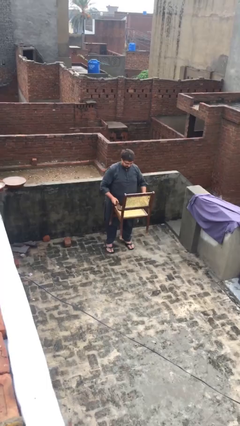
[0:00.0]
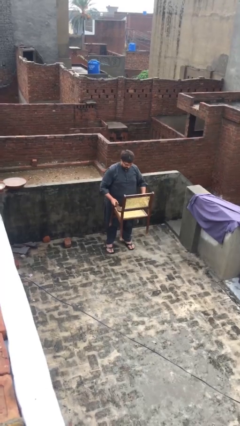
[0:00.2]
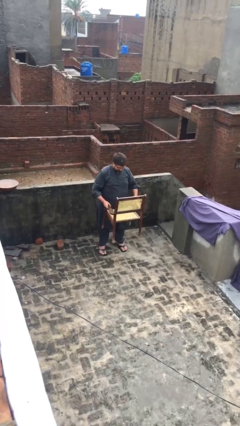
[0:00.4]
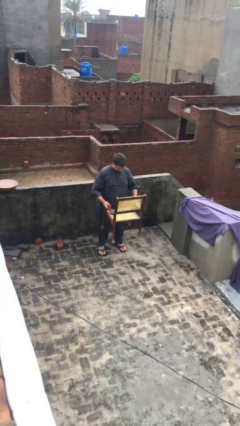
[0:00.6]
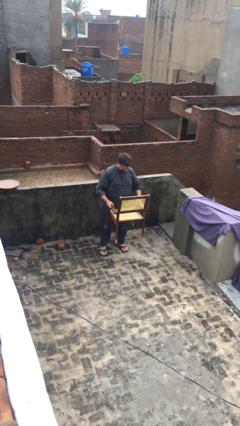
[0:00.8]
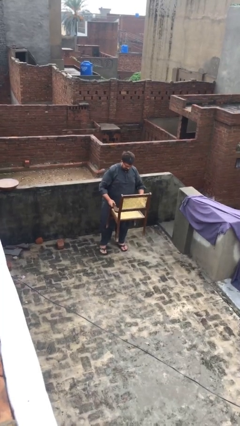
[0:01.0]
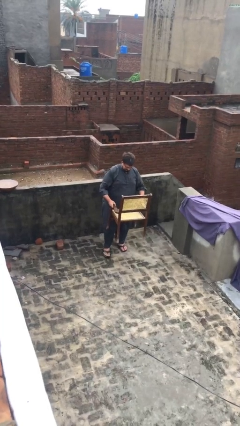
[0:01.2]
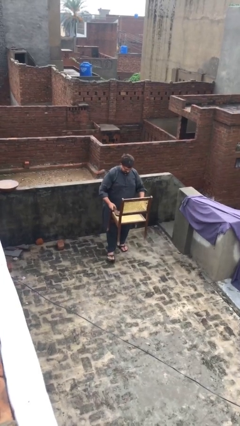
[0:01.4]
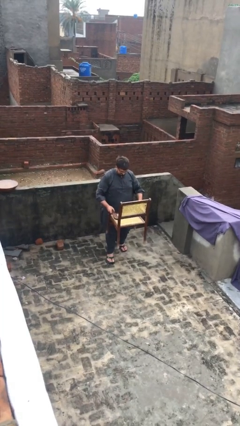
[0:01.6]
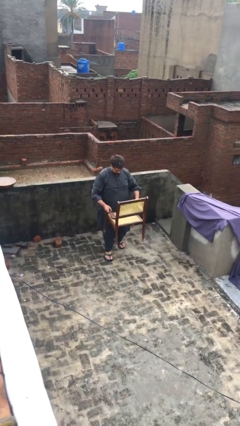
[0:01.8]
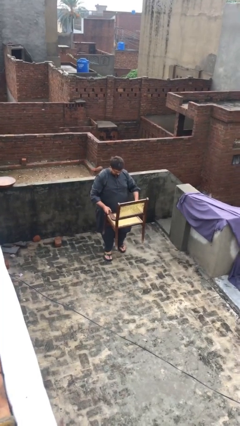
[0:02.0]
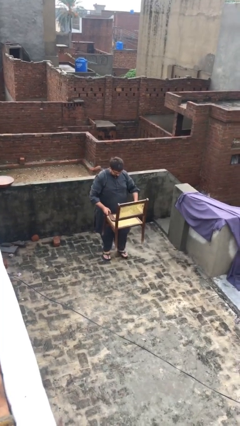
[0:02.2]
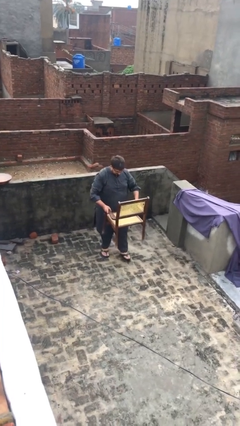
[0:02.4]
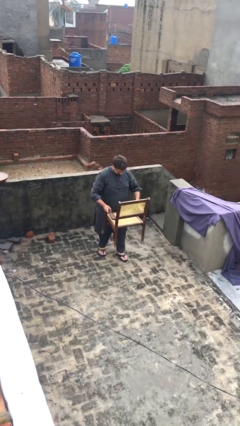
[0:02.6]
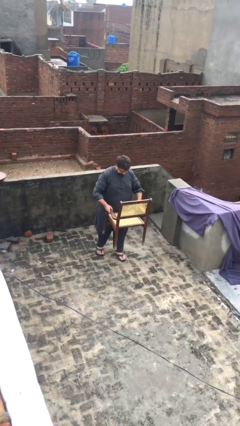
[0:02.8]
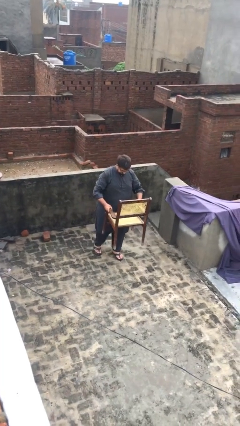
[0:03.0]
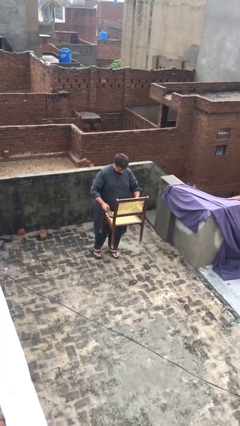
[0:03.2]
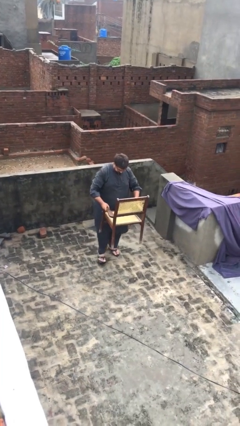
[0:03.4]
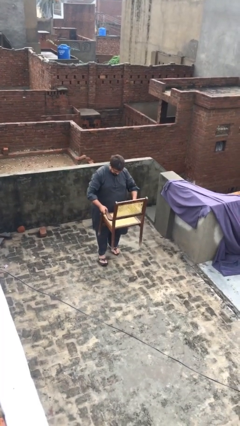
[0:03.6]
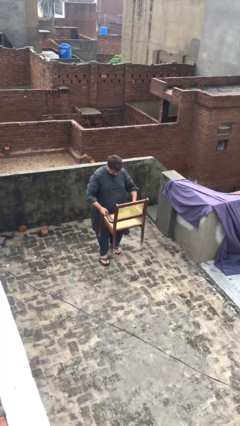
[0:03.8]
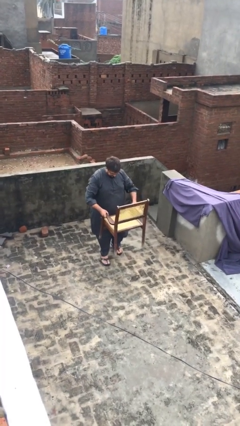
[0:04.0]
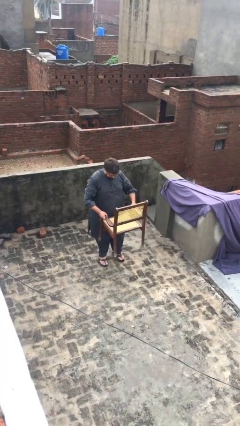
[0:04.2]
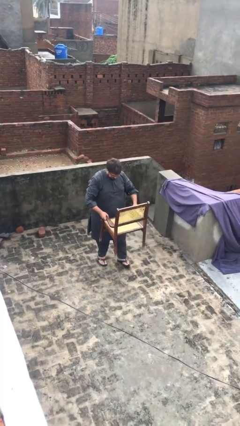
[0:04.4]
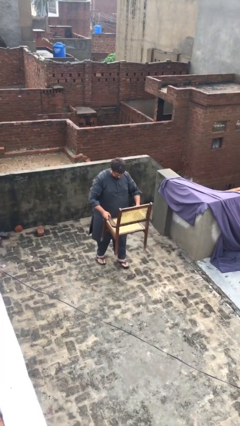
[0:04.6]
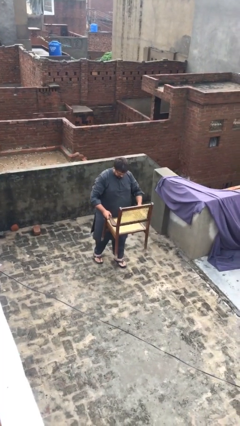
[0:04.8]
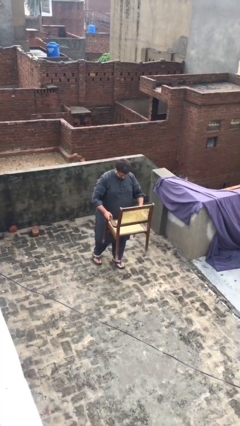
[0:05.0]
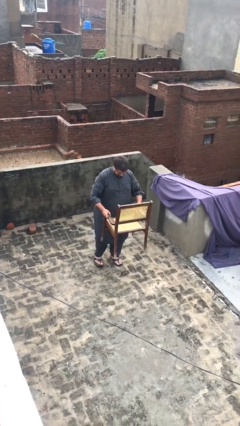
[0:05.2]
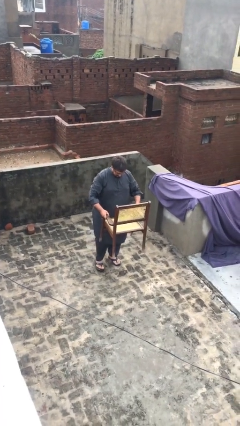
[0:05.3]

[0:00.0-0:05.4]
person carries heavy object

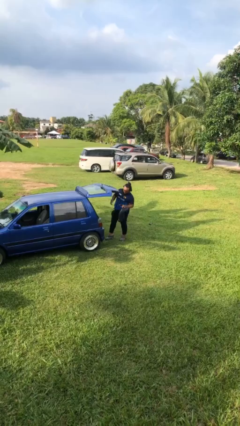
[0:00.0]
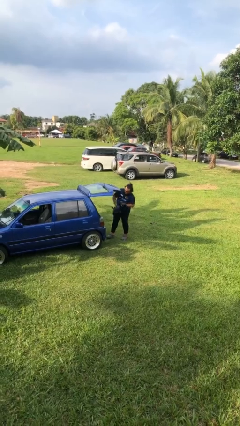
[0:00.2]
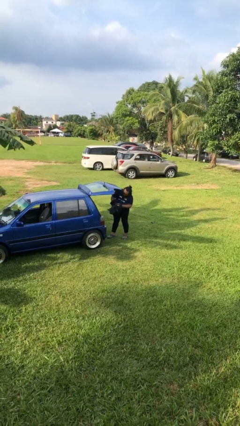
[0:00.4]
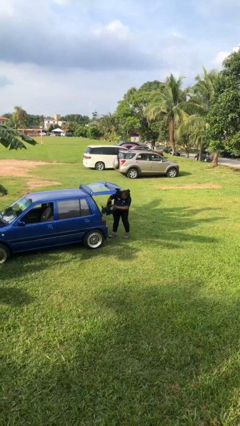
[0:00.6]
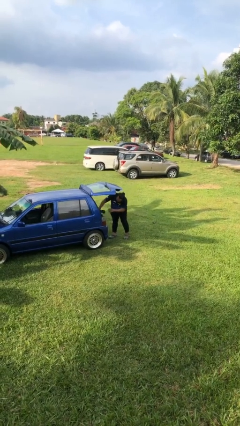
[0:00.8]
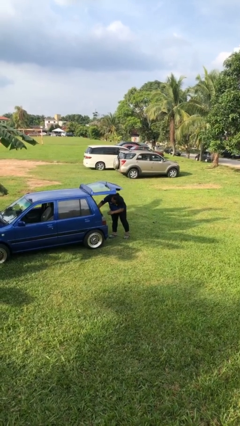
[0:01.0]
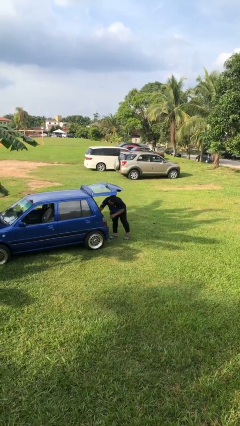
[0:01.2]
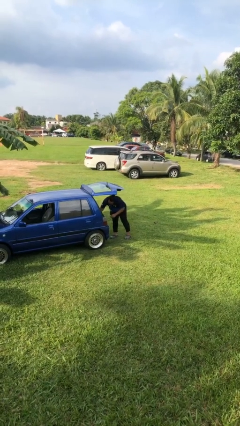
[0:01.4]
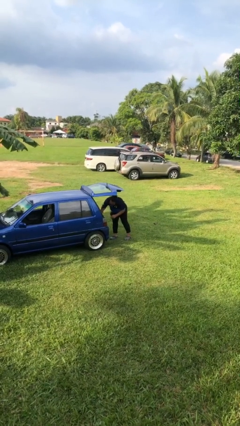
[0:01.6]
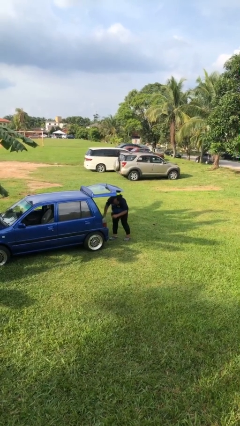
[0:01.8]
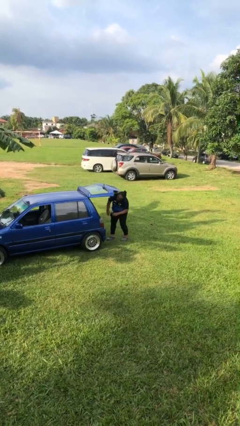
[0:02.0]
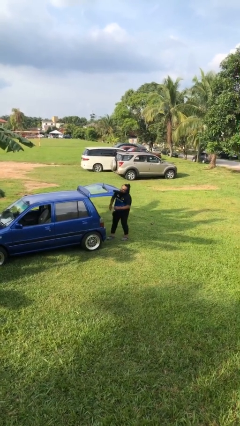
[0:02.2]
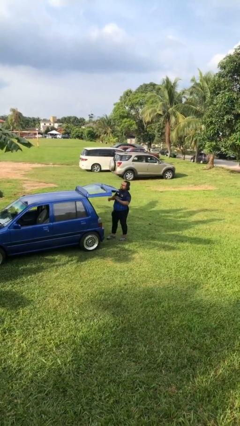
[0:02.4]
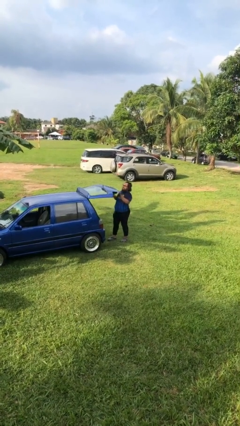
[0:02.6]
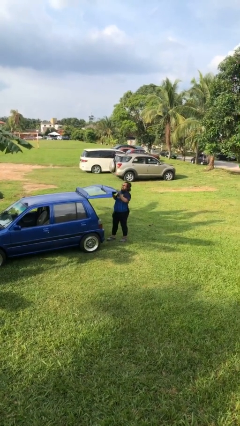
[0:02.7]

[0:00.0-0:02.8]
person loads car

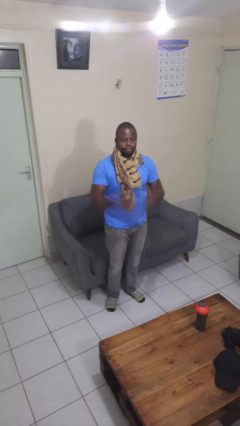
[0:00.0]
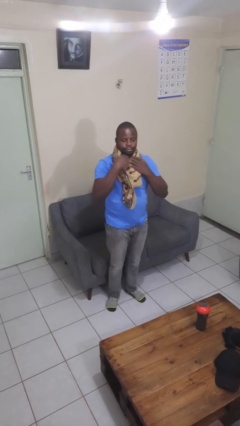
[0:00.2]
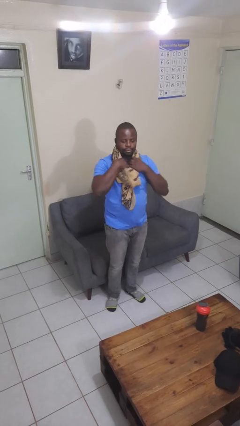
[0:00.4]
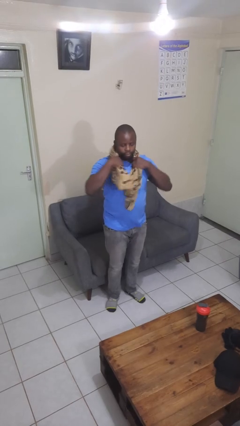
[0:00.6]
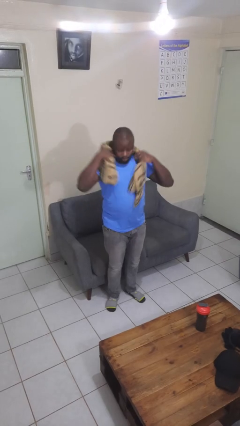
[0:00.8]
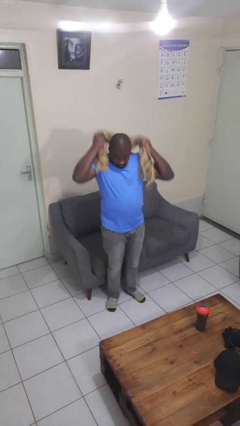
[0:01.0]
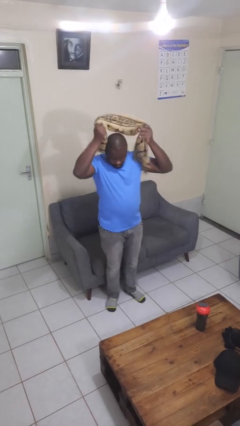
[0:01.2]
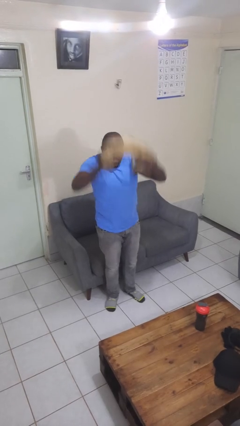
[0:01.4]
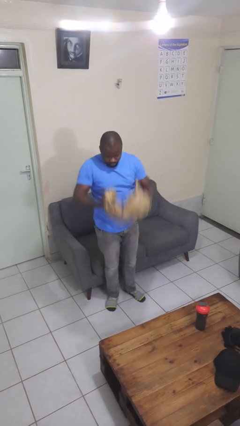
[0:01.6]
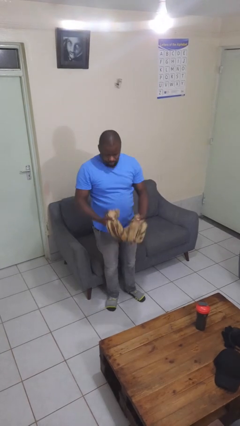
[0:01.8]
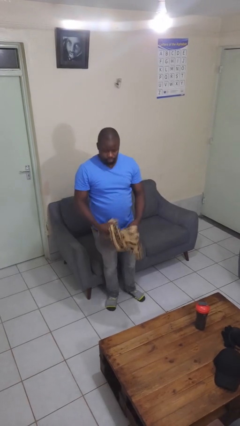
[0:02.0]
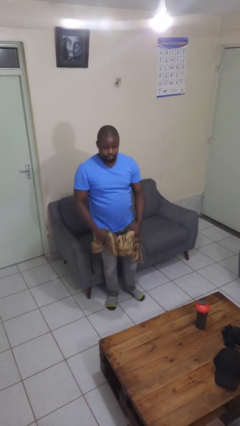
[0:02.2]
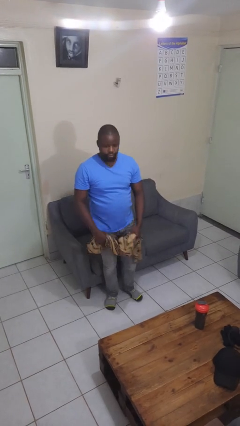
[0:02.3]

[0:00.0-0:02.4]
person takes off scarf

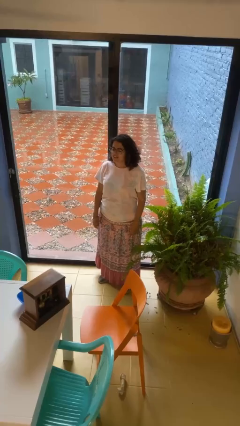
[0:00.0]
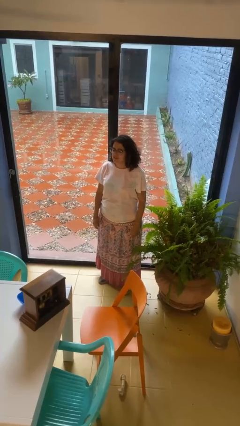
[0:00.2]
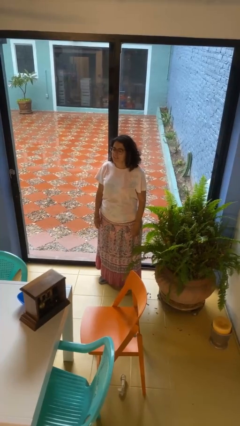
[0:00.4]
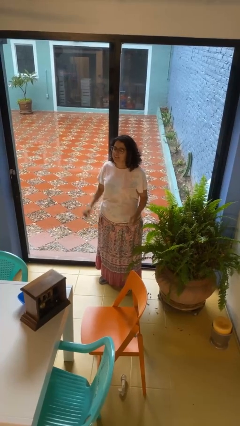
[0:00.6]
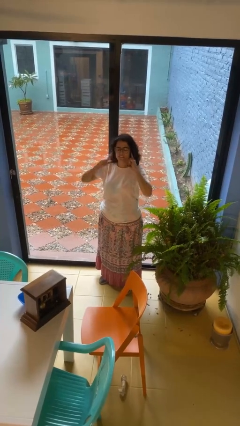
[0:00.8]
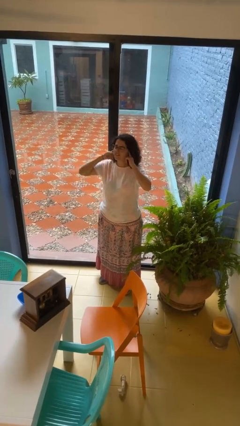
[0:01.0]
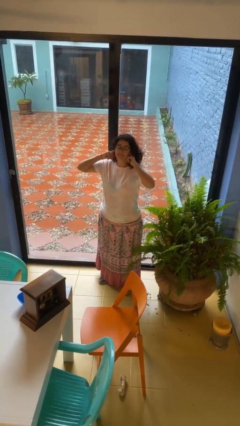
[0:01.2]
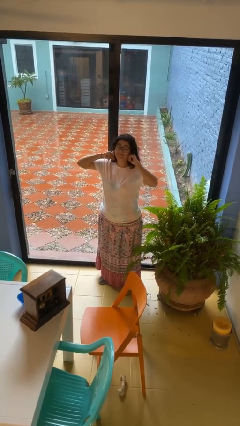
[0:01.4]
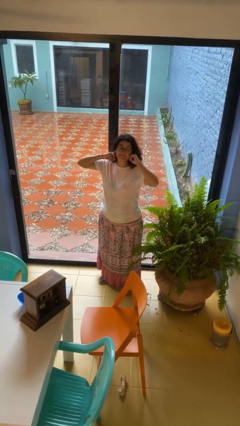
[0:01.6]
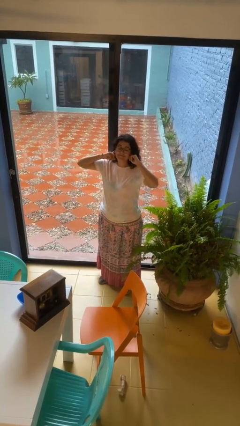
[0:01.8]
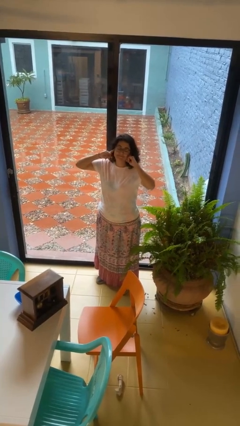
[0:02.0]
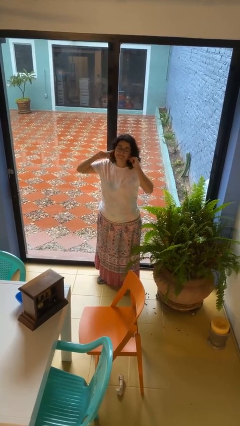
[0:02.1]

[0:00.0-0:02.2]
person puts fingers in ear

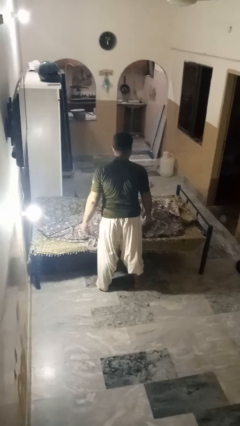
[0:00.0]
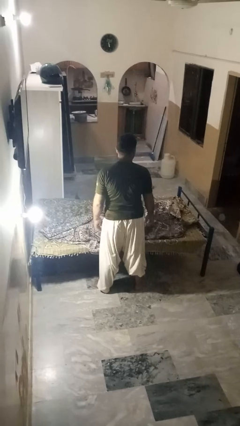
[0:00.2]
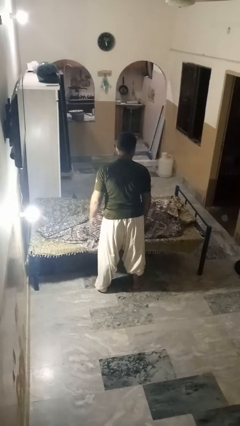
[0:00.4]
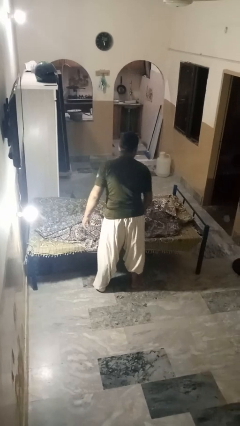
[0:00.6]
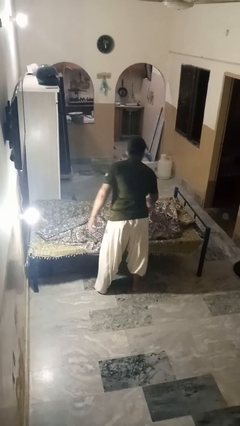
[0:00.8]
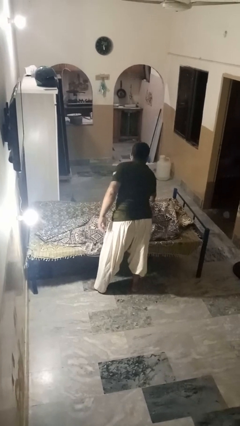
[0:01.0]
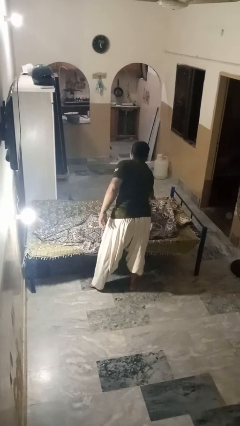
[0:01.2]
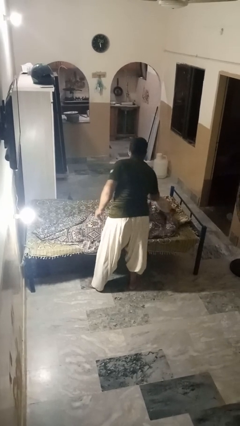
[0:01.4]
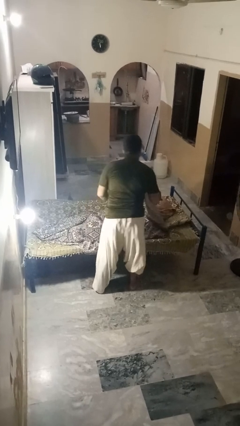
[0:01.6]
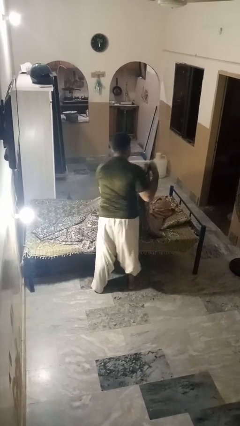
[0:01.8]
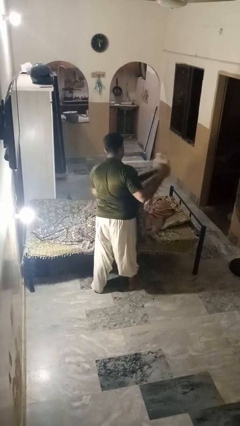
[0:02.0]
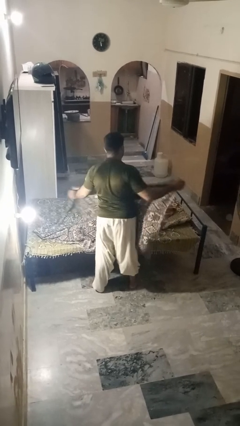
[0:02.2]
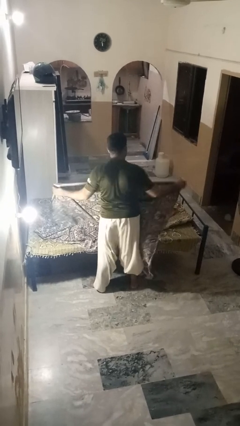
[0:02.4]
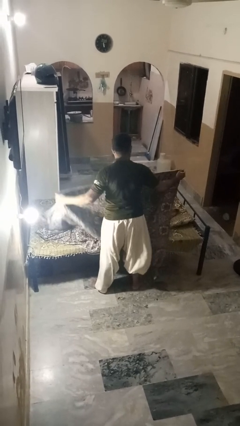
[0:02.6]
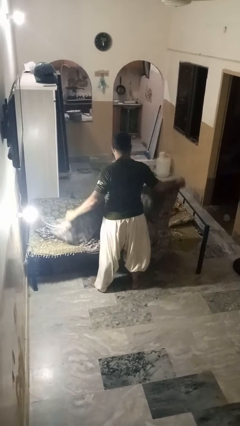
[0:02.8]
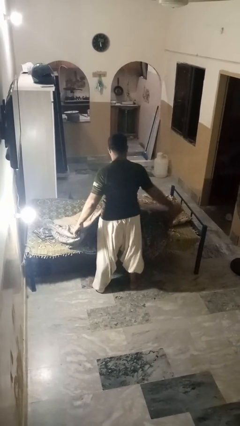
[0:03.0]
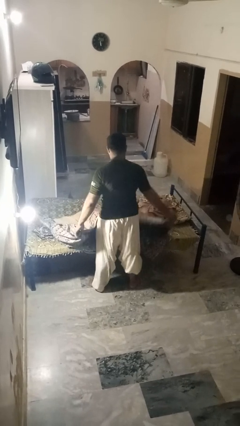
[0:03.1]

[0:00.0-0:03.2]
person uncovers friend with blanket

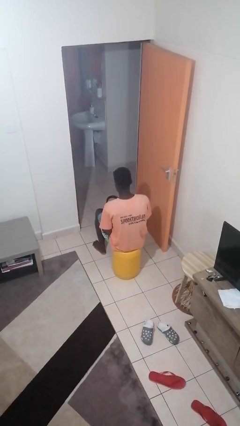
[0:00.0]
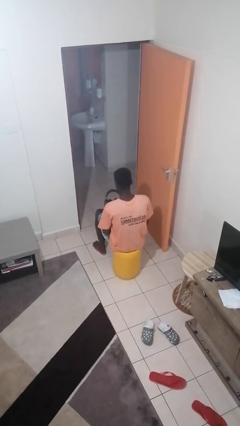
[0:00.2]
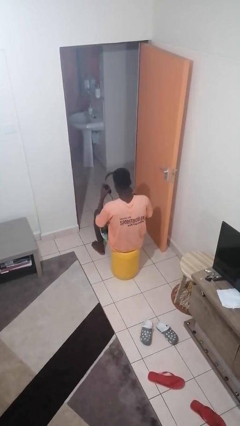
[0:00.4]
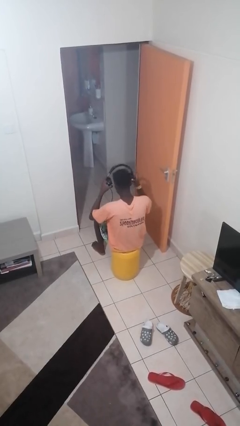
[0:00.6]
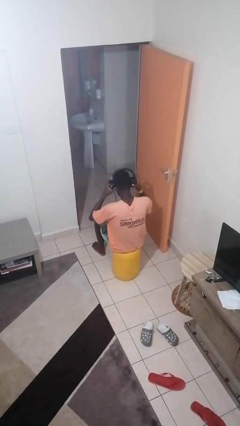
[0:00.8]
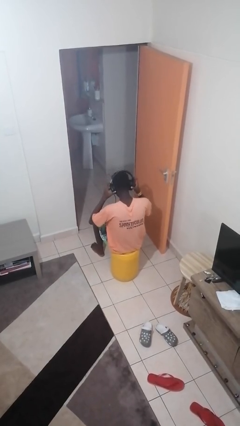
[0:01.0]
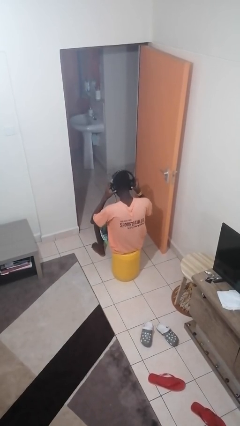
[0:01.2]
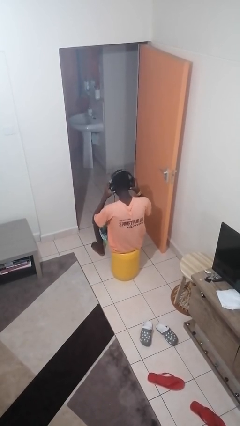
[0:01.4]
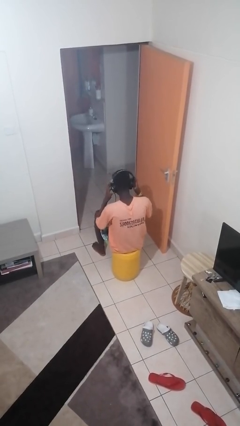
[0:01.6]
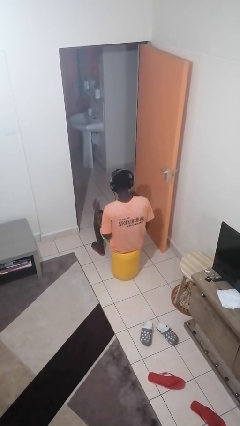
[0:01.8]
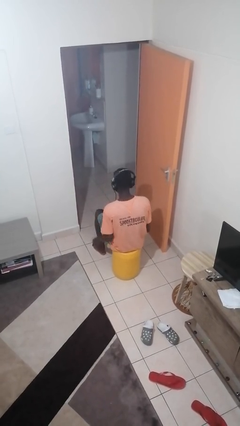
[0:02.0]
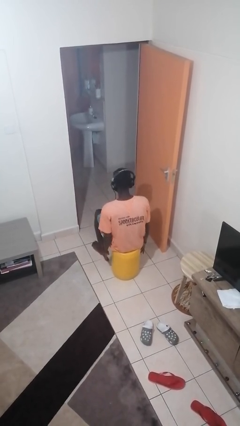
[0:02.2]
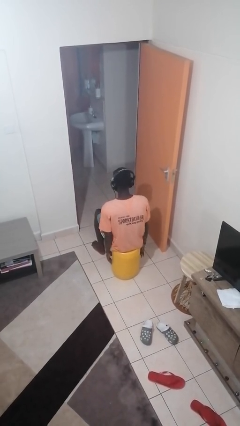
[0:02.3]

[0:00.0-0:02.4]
person puts on headphones
